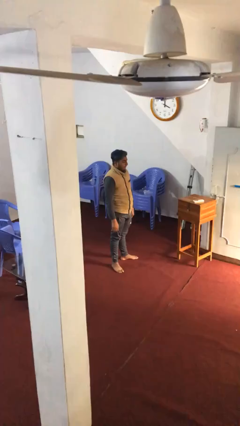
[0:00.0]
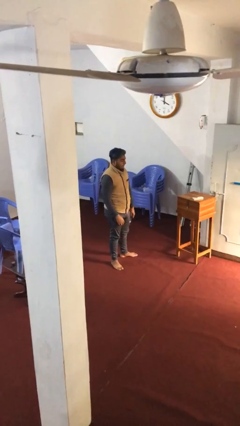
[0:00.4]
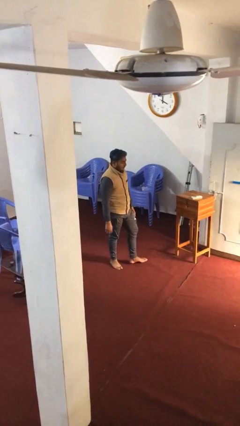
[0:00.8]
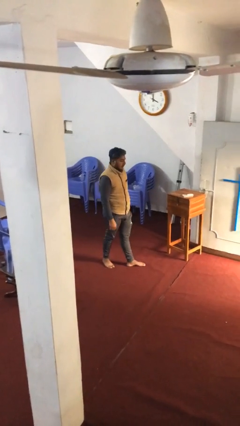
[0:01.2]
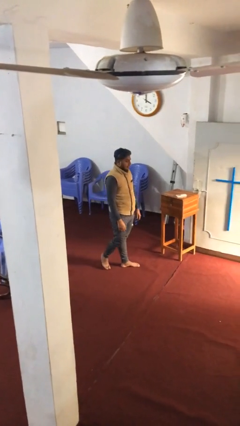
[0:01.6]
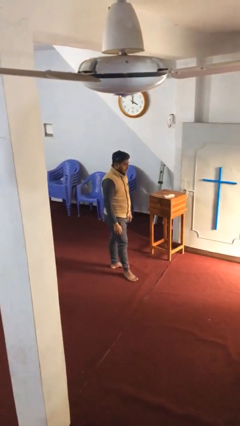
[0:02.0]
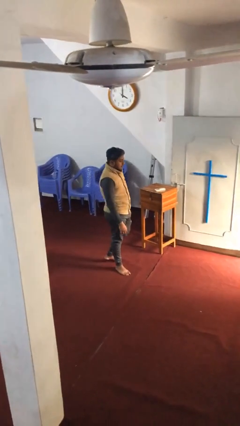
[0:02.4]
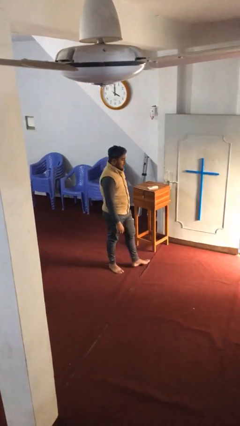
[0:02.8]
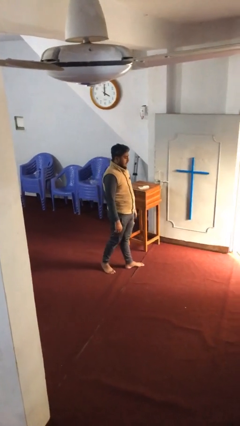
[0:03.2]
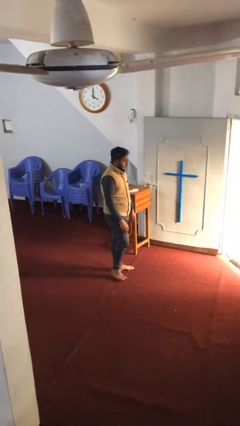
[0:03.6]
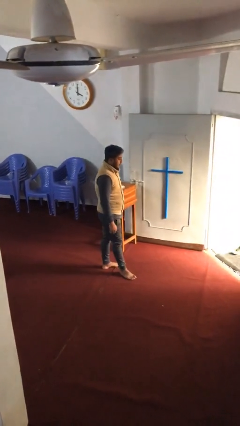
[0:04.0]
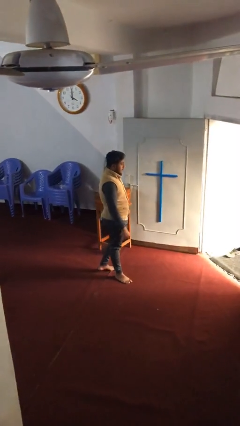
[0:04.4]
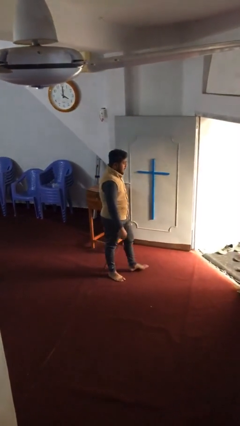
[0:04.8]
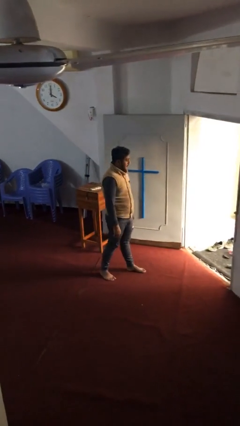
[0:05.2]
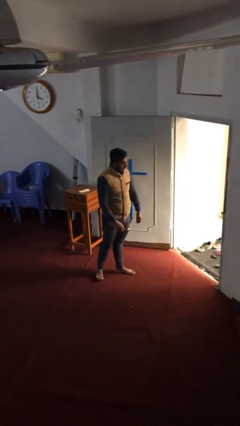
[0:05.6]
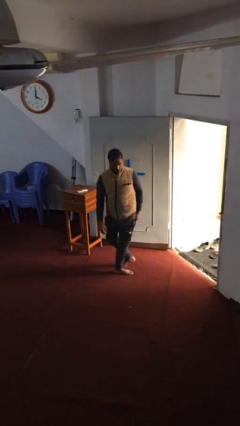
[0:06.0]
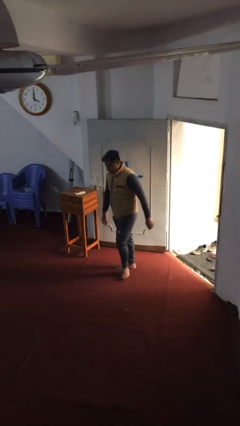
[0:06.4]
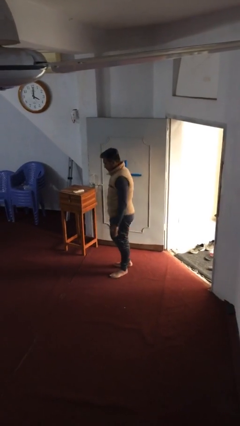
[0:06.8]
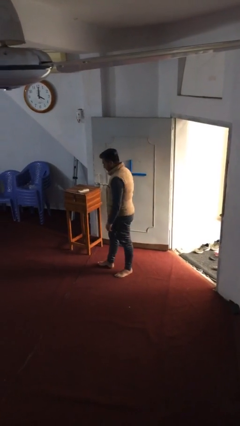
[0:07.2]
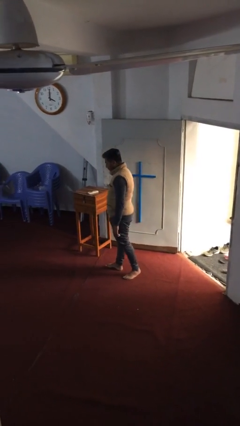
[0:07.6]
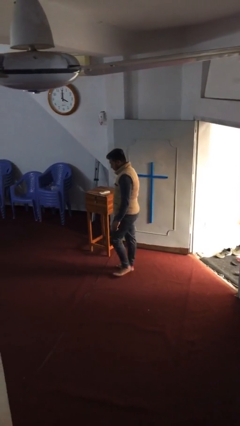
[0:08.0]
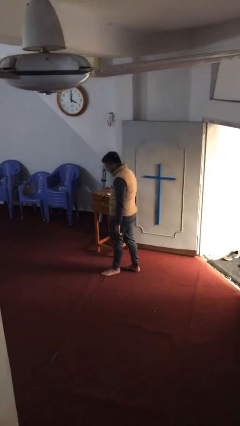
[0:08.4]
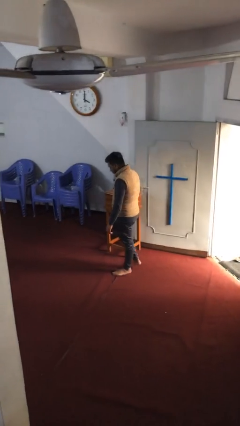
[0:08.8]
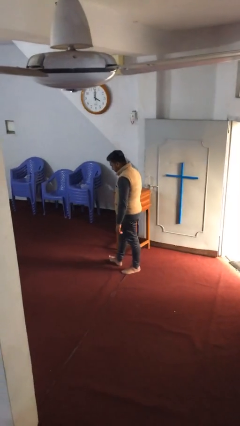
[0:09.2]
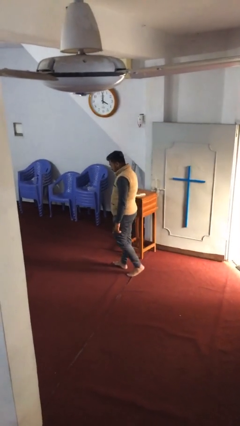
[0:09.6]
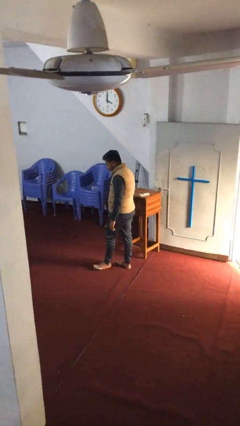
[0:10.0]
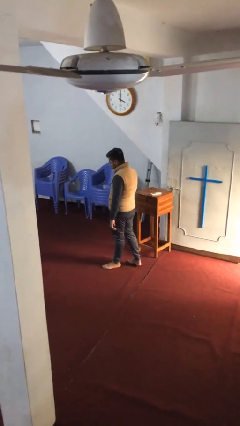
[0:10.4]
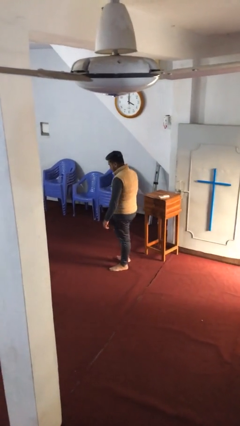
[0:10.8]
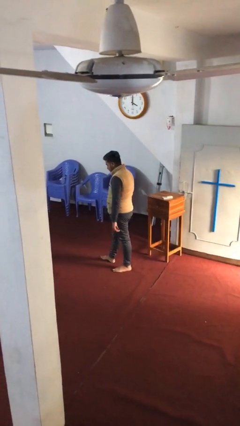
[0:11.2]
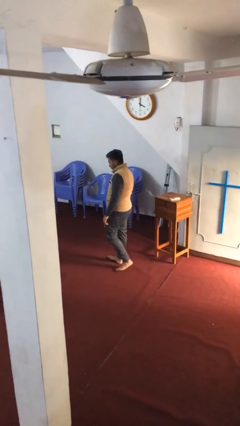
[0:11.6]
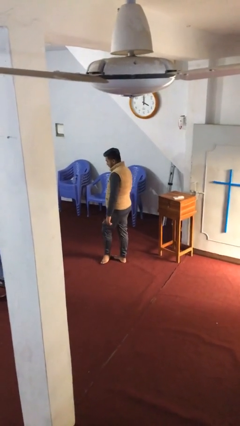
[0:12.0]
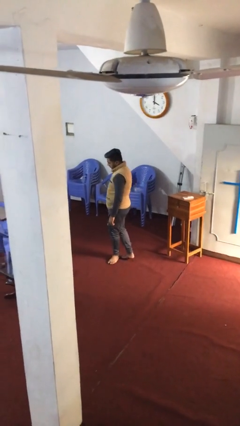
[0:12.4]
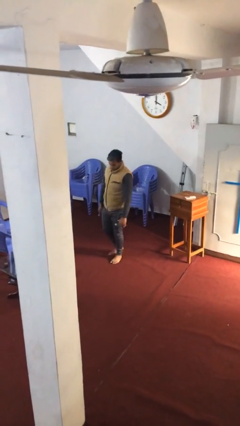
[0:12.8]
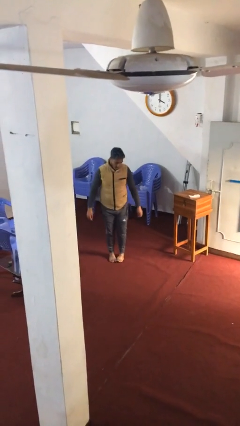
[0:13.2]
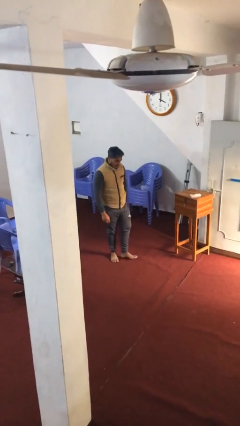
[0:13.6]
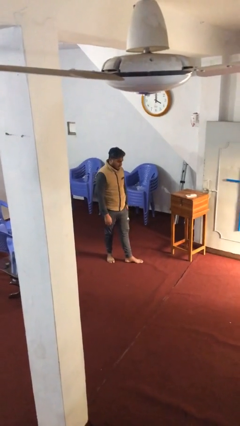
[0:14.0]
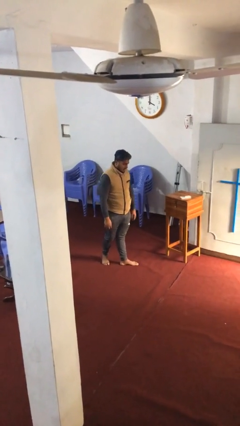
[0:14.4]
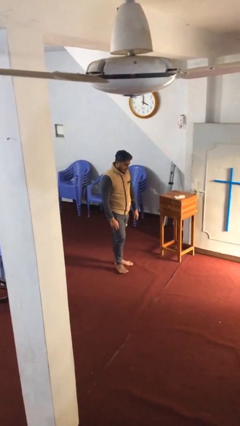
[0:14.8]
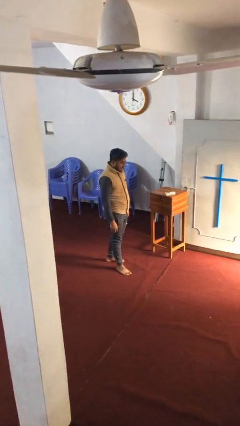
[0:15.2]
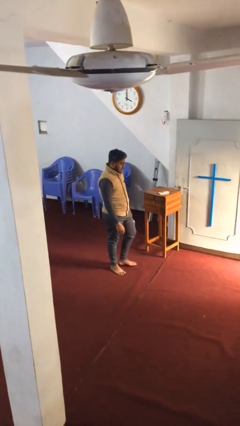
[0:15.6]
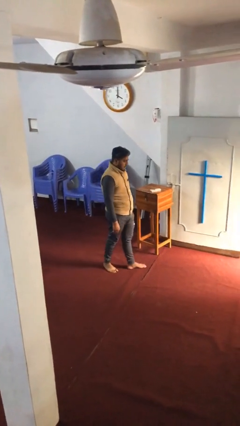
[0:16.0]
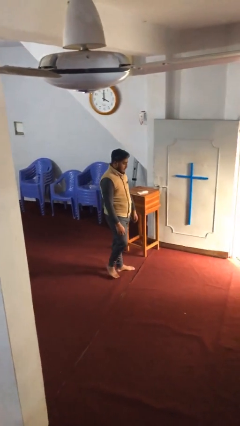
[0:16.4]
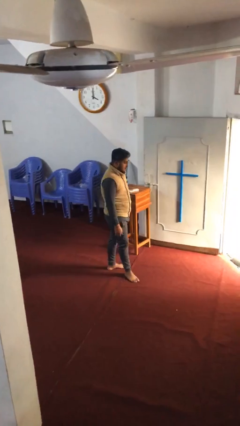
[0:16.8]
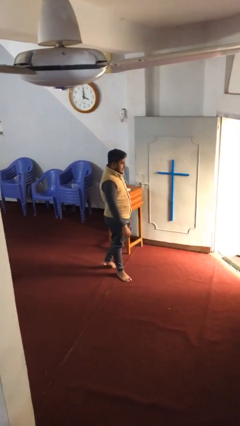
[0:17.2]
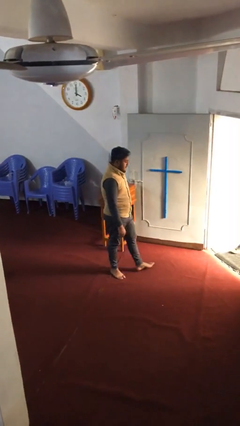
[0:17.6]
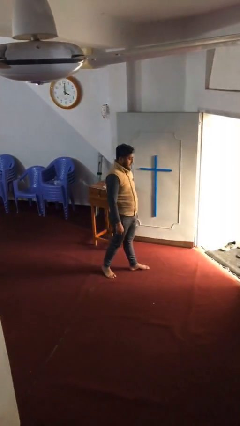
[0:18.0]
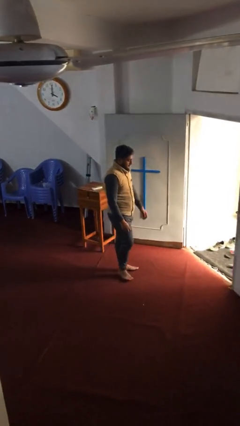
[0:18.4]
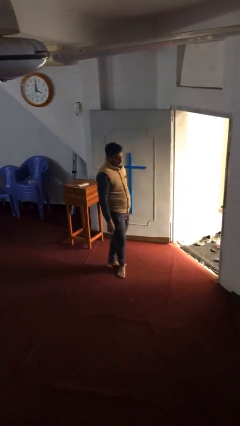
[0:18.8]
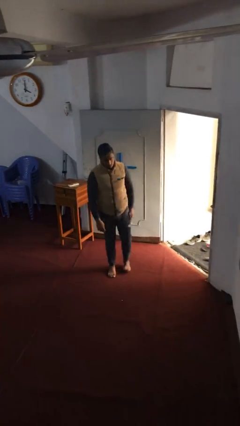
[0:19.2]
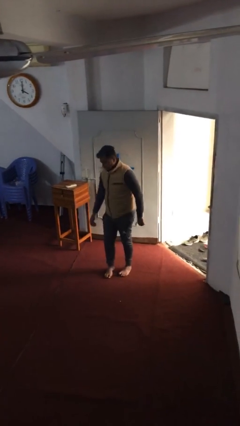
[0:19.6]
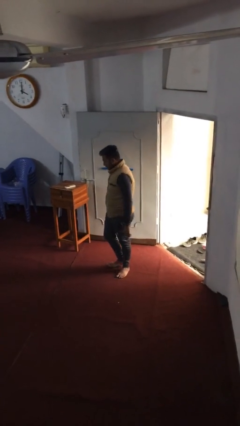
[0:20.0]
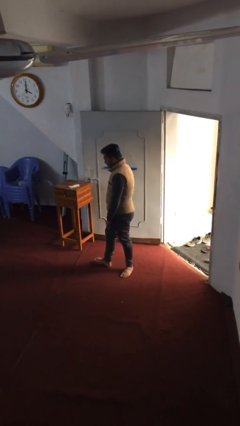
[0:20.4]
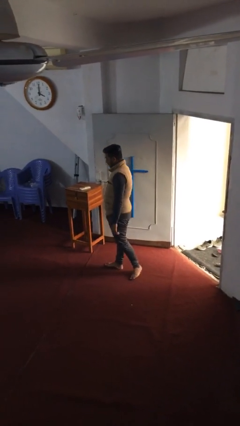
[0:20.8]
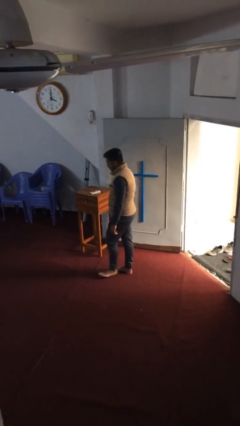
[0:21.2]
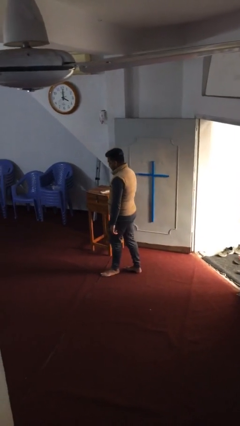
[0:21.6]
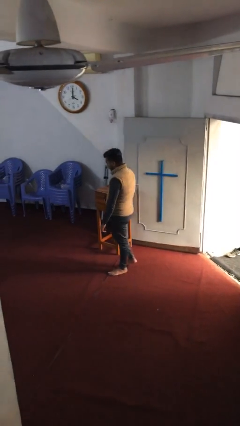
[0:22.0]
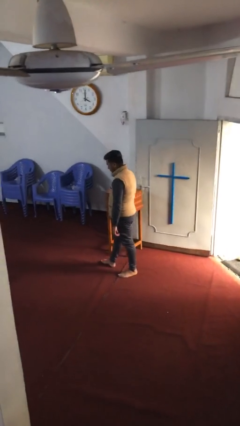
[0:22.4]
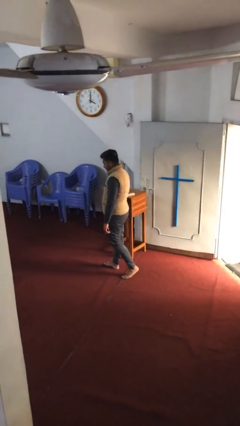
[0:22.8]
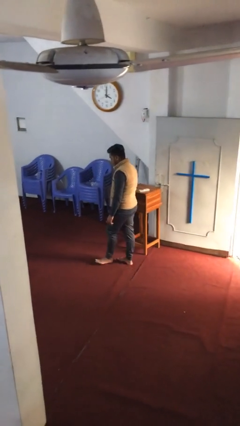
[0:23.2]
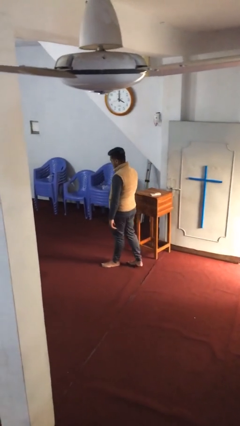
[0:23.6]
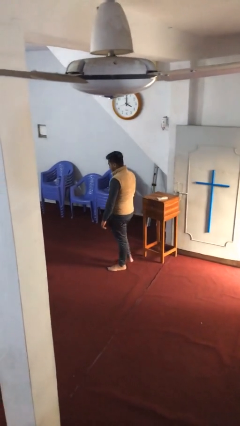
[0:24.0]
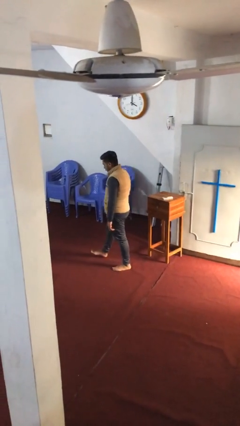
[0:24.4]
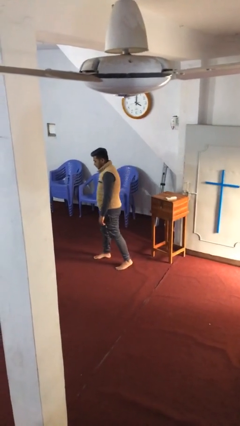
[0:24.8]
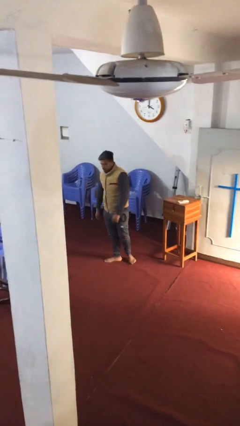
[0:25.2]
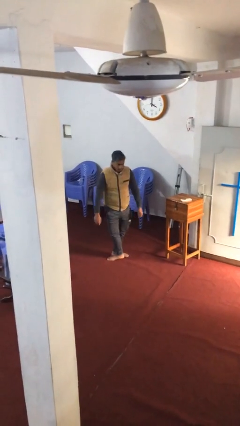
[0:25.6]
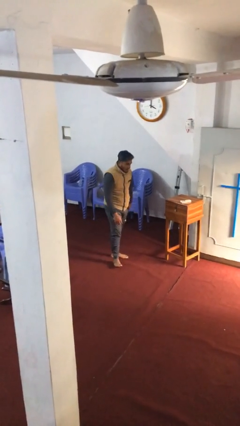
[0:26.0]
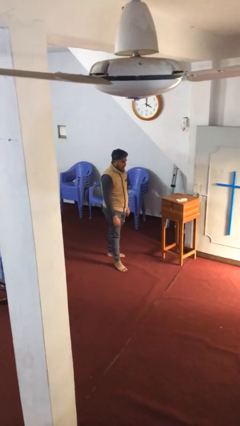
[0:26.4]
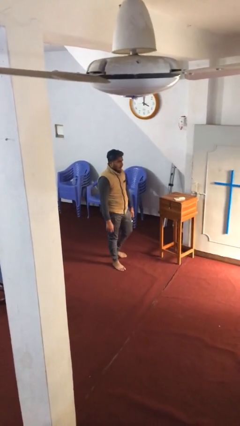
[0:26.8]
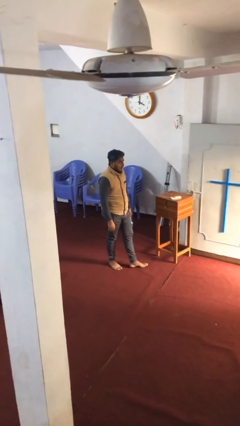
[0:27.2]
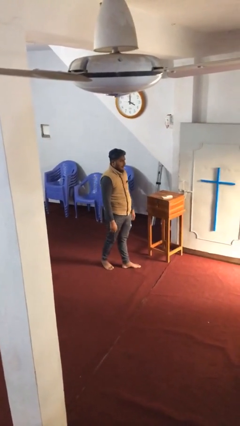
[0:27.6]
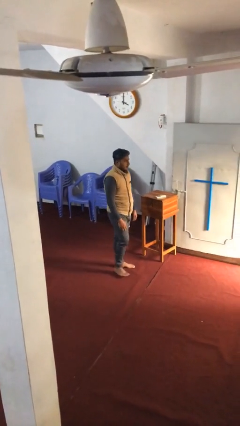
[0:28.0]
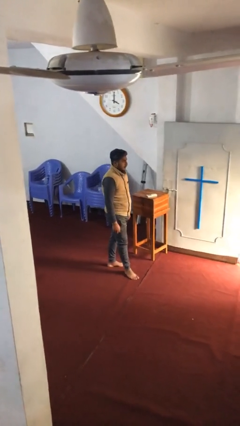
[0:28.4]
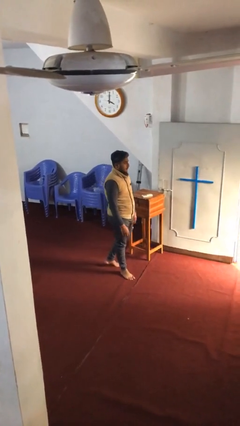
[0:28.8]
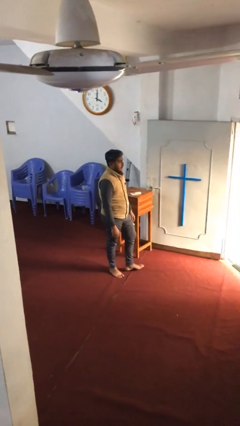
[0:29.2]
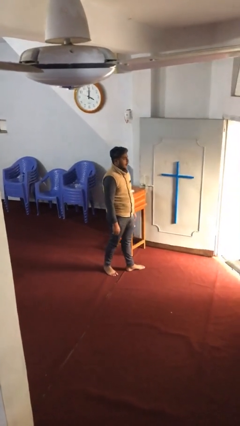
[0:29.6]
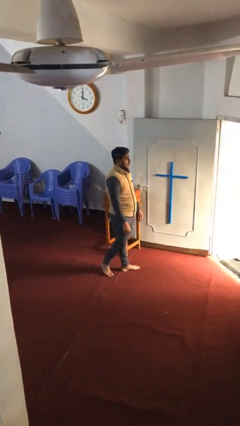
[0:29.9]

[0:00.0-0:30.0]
person walks

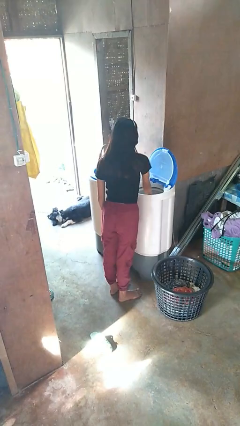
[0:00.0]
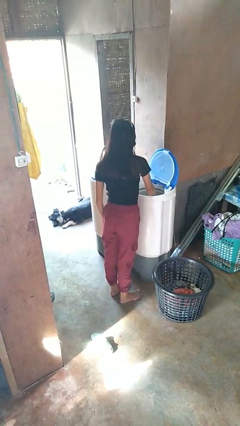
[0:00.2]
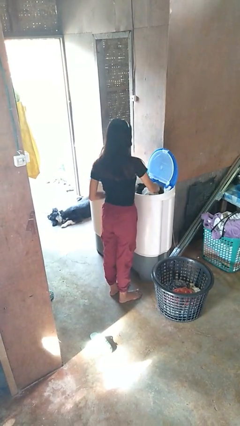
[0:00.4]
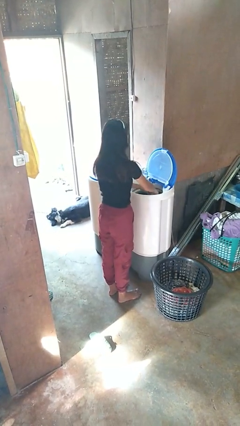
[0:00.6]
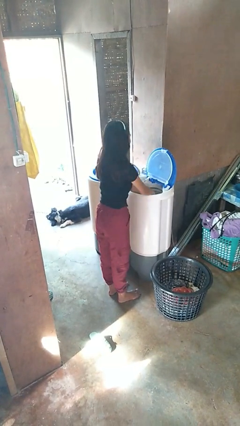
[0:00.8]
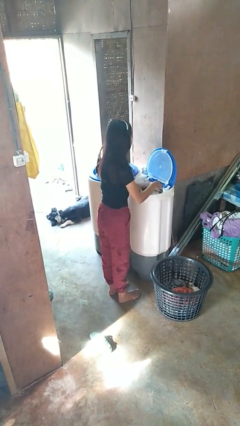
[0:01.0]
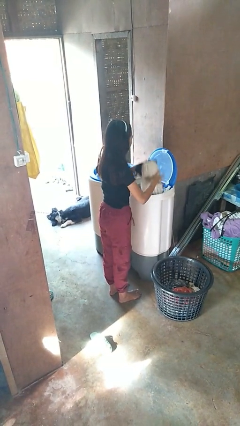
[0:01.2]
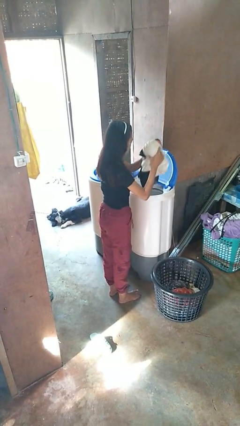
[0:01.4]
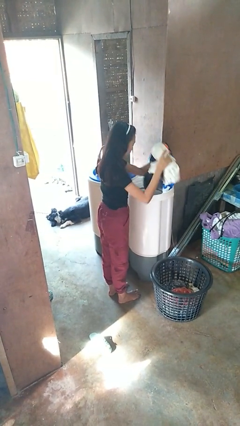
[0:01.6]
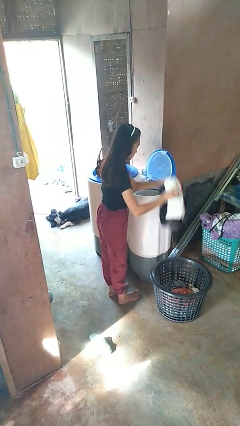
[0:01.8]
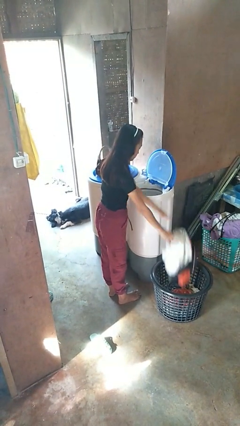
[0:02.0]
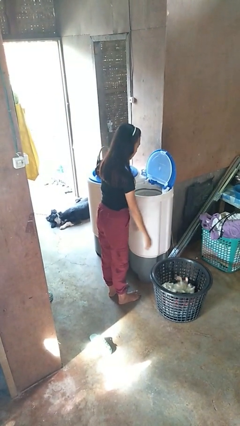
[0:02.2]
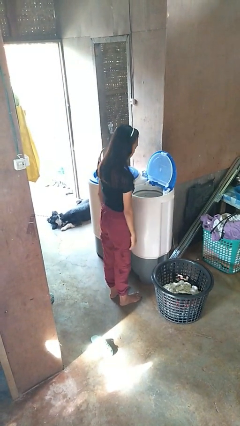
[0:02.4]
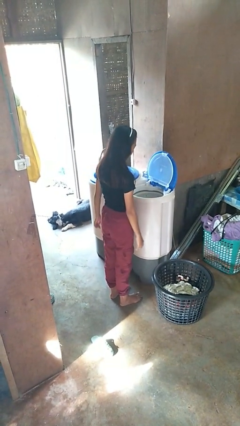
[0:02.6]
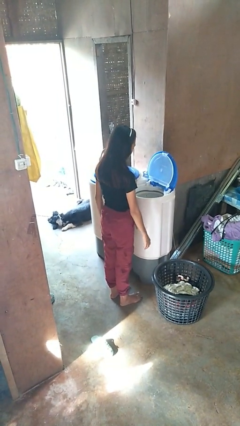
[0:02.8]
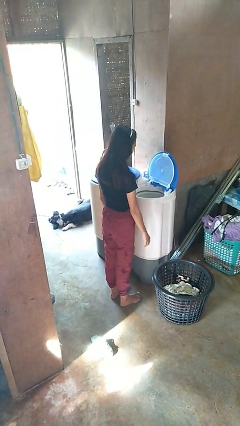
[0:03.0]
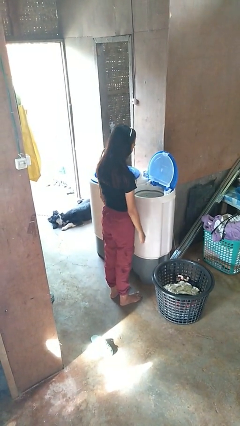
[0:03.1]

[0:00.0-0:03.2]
person unloads clotheswasher
